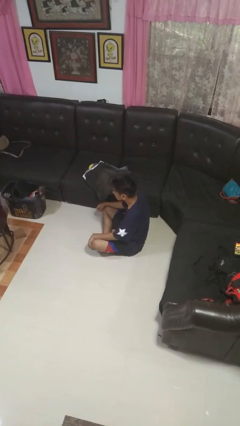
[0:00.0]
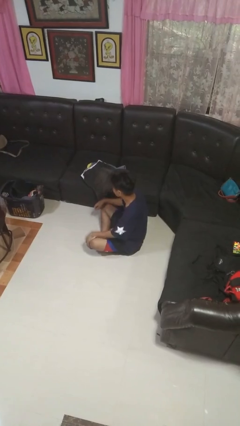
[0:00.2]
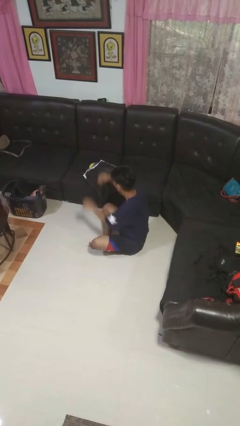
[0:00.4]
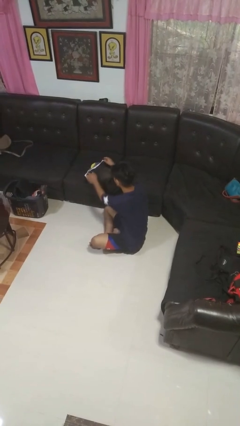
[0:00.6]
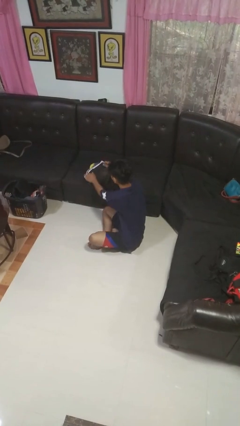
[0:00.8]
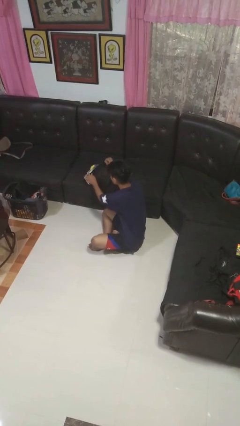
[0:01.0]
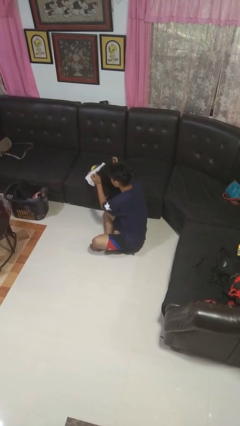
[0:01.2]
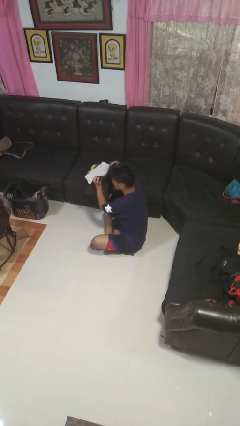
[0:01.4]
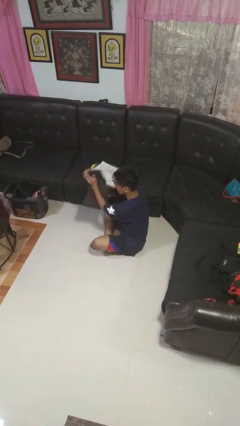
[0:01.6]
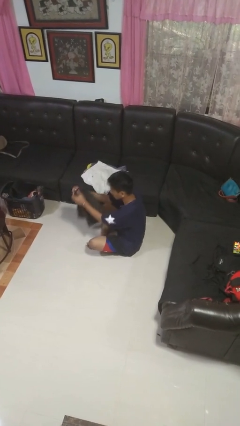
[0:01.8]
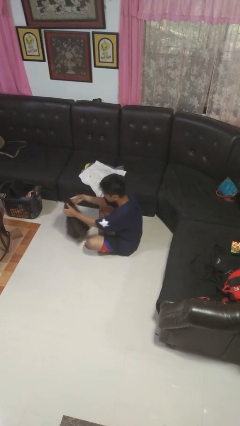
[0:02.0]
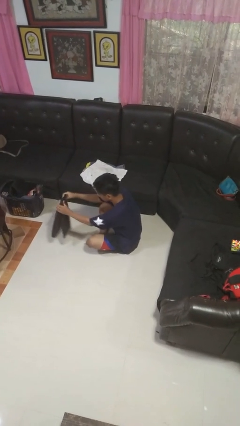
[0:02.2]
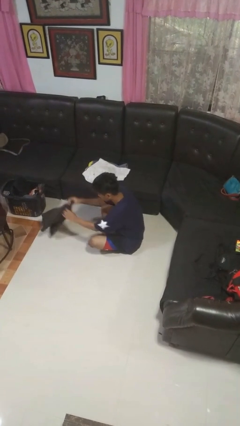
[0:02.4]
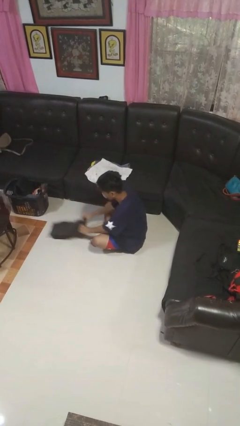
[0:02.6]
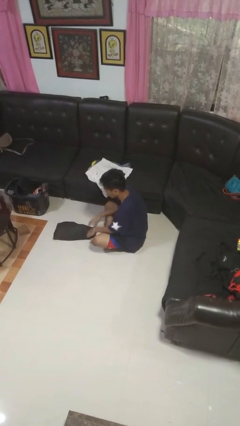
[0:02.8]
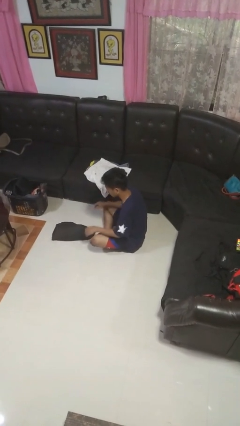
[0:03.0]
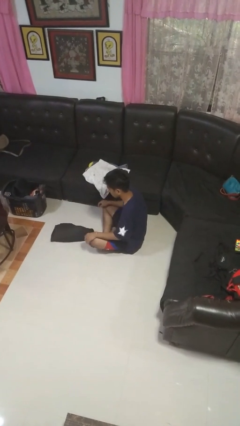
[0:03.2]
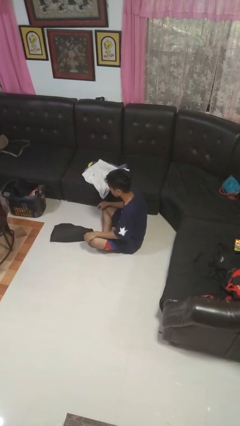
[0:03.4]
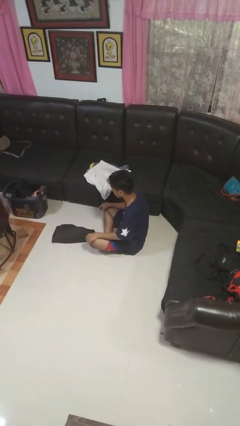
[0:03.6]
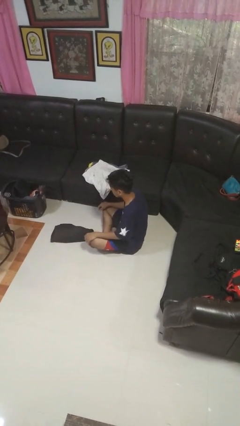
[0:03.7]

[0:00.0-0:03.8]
person folds pants

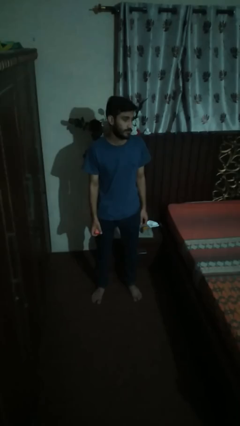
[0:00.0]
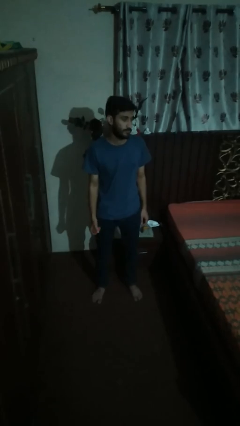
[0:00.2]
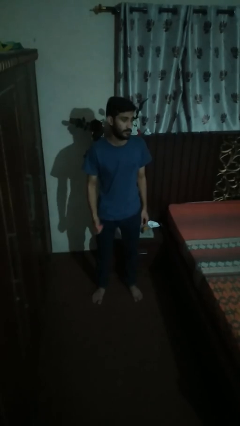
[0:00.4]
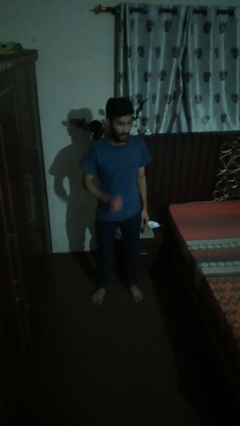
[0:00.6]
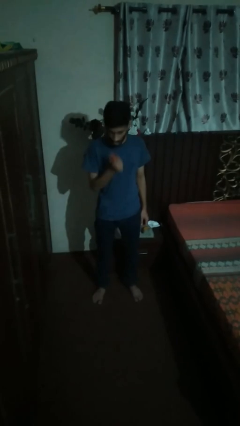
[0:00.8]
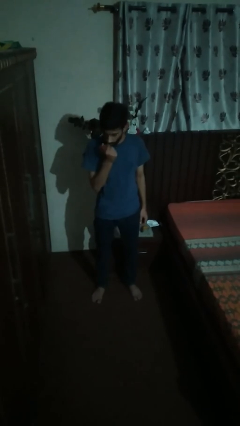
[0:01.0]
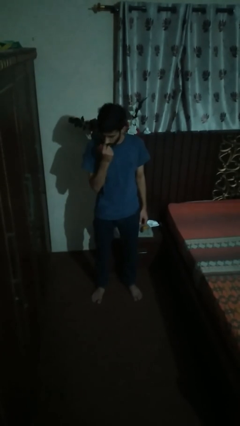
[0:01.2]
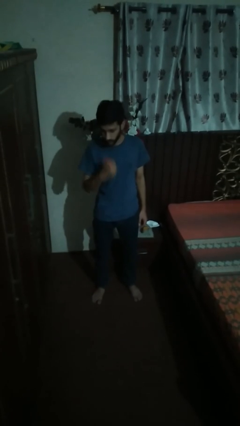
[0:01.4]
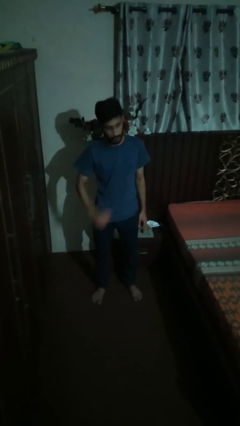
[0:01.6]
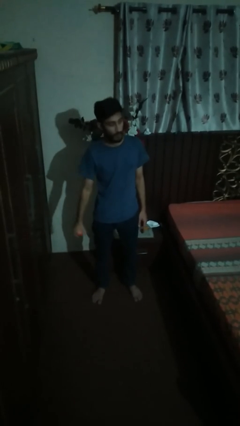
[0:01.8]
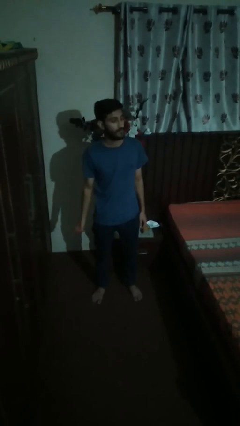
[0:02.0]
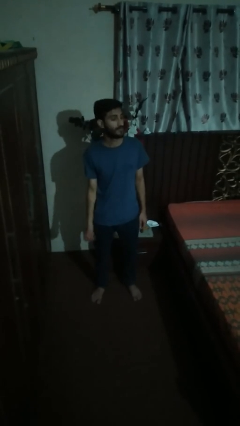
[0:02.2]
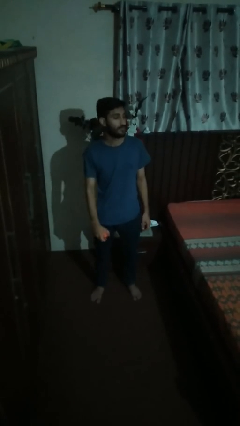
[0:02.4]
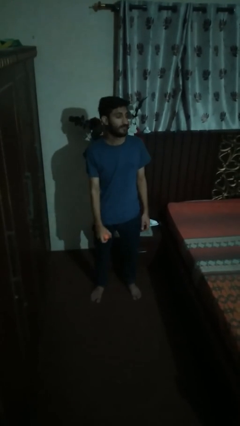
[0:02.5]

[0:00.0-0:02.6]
person eats apple

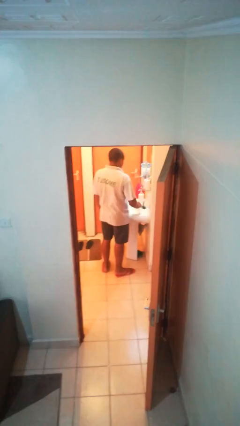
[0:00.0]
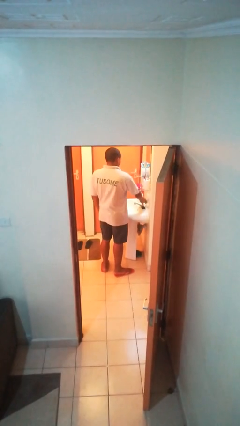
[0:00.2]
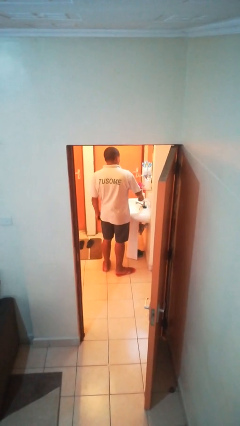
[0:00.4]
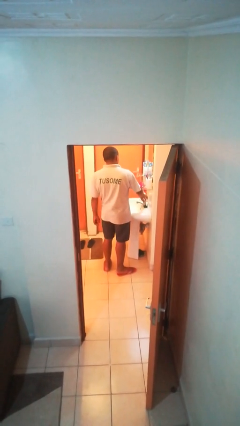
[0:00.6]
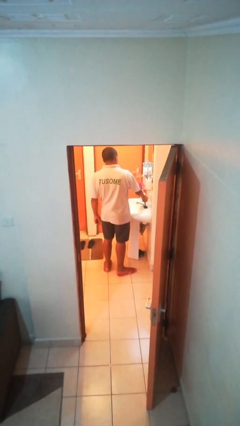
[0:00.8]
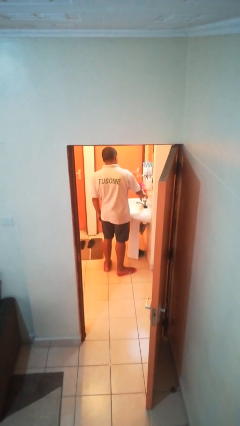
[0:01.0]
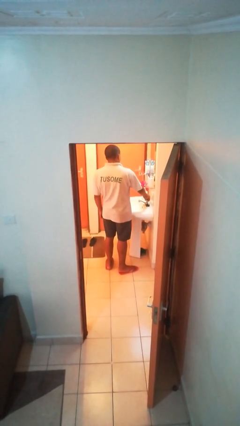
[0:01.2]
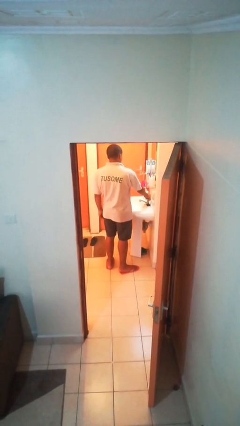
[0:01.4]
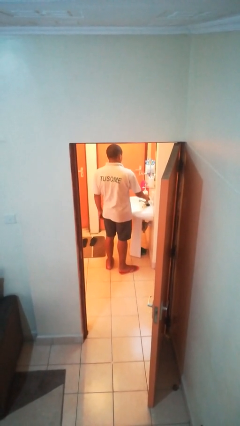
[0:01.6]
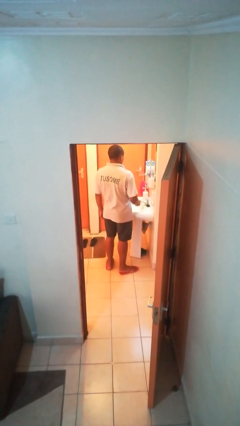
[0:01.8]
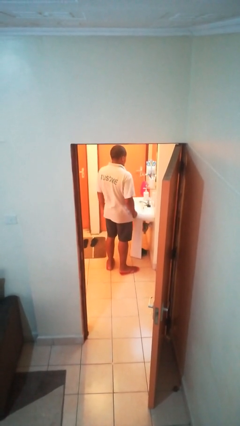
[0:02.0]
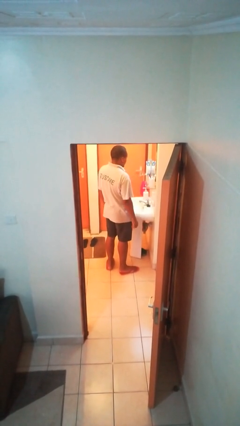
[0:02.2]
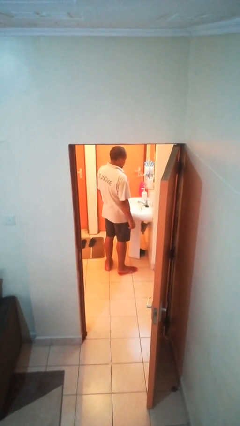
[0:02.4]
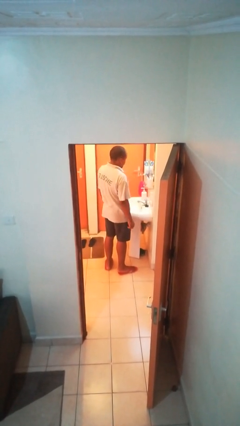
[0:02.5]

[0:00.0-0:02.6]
person turns off faucet

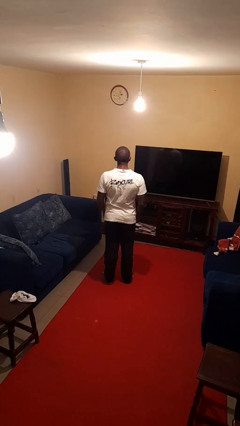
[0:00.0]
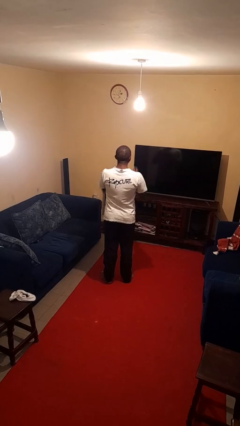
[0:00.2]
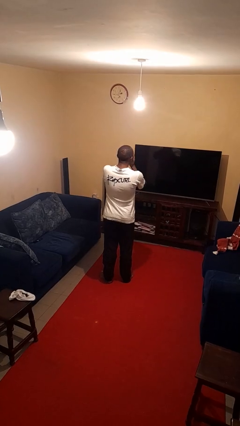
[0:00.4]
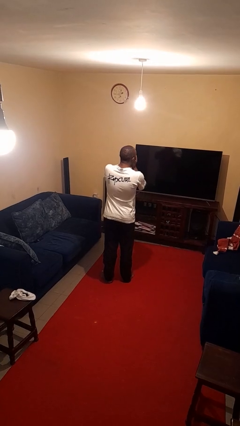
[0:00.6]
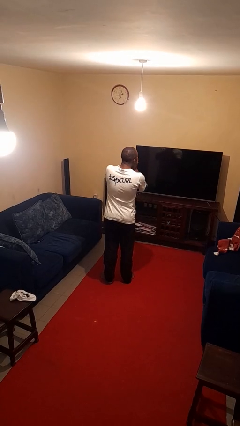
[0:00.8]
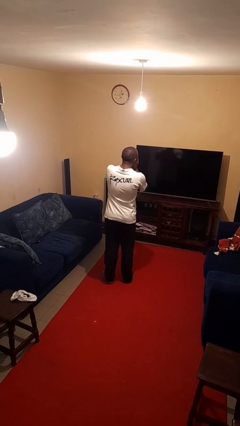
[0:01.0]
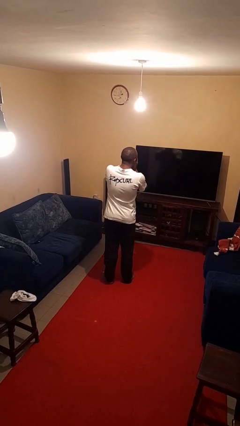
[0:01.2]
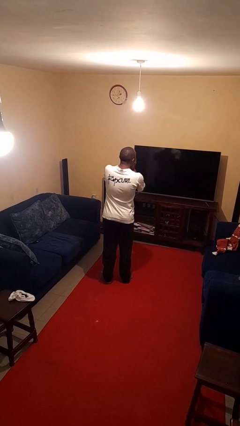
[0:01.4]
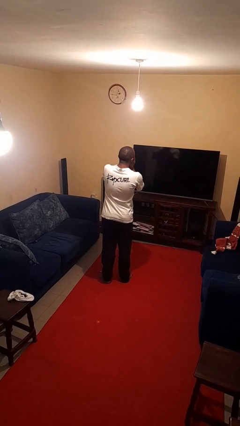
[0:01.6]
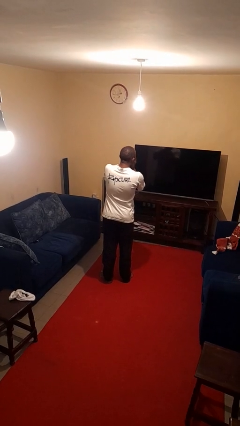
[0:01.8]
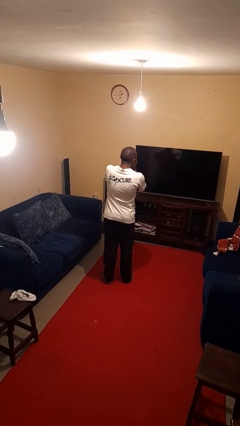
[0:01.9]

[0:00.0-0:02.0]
person sneezes into hand

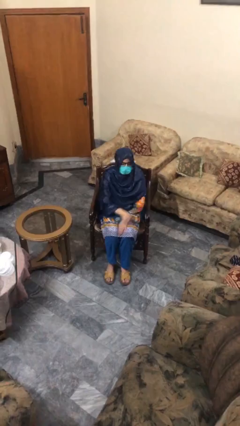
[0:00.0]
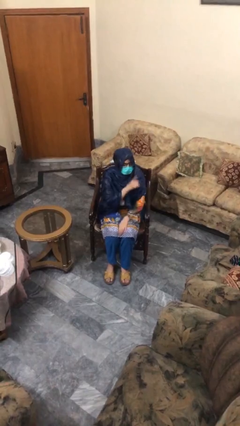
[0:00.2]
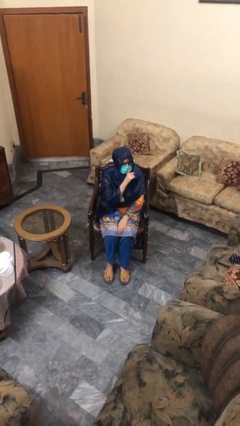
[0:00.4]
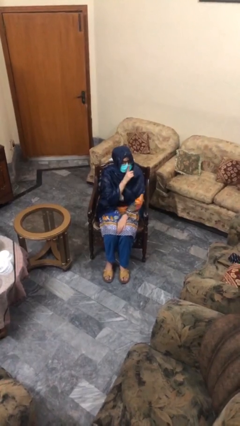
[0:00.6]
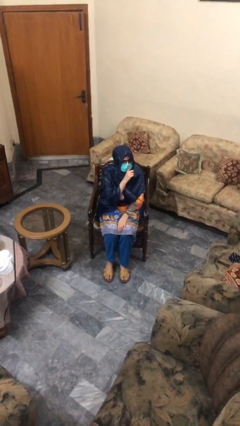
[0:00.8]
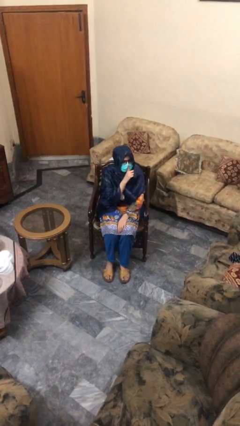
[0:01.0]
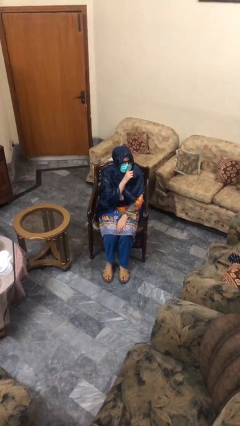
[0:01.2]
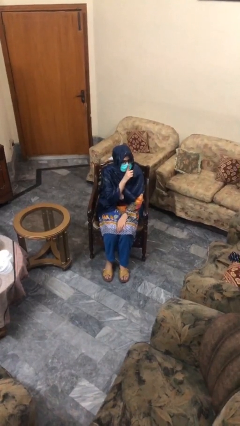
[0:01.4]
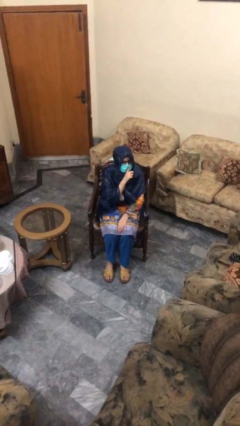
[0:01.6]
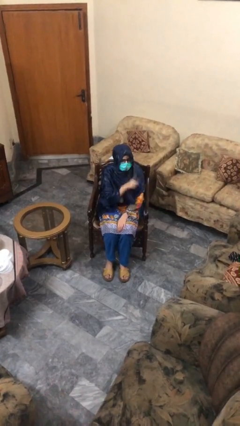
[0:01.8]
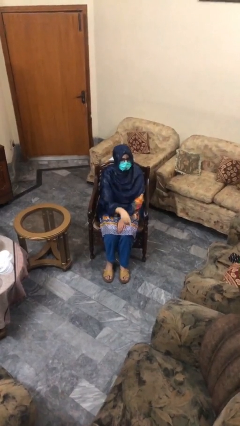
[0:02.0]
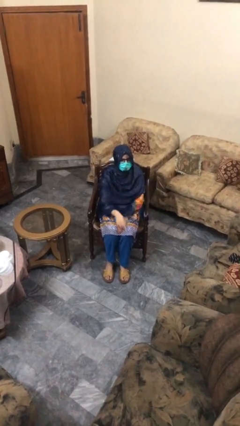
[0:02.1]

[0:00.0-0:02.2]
person gestures be quiet

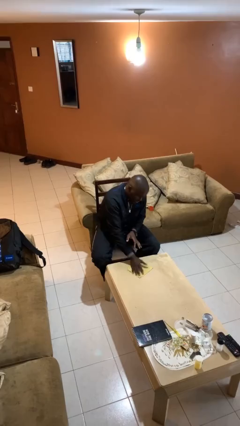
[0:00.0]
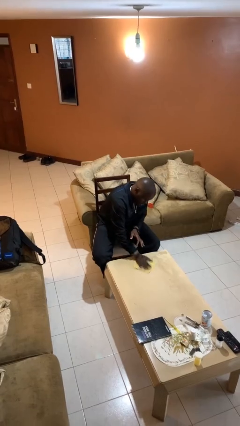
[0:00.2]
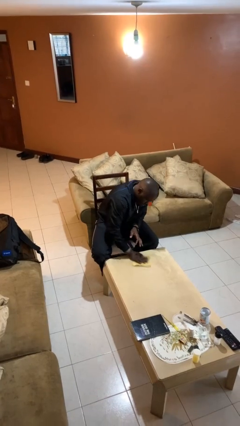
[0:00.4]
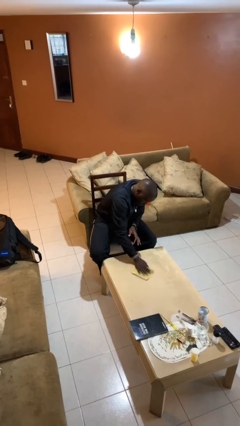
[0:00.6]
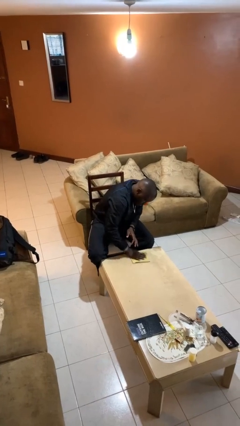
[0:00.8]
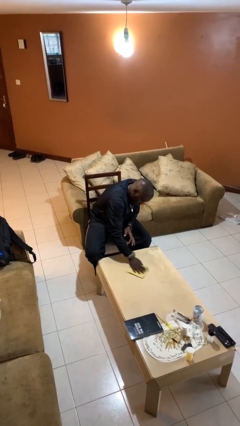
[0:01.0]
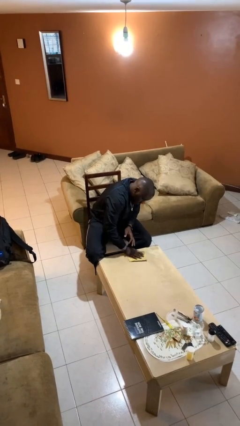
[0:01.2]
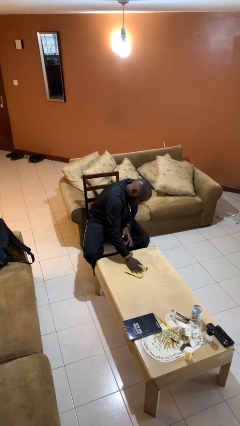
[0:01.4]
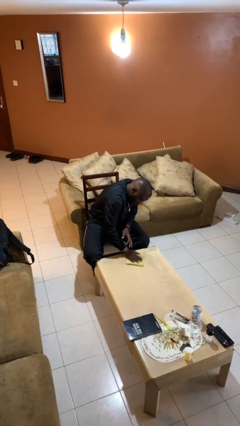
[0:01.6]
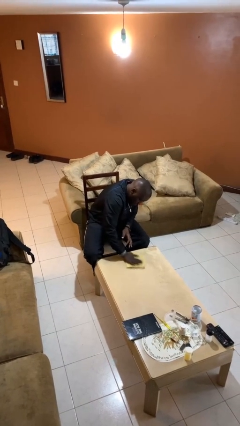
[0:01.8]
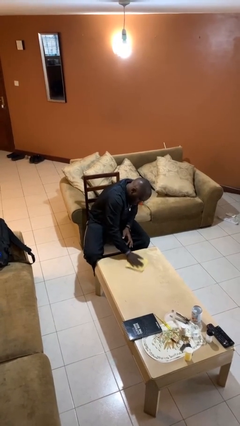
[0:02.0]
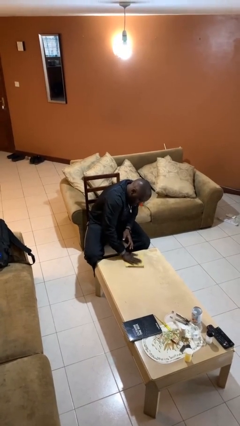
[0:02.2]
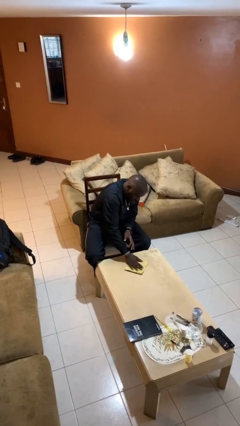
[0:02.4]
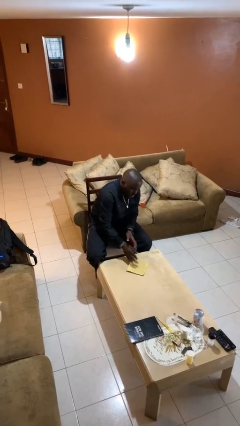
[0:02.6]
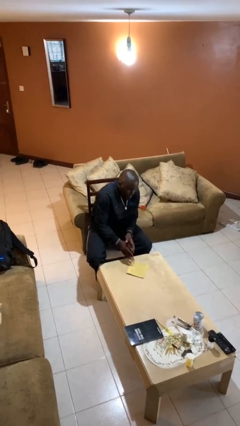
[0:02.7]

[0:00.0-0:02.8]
person cleans table with rag

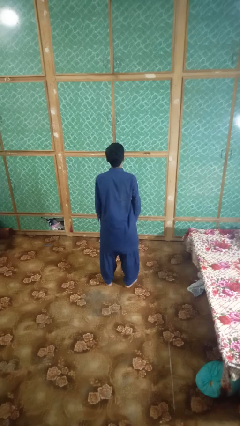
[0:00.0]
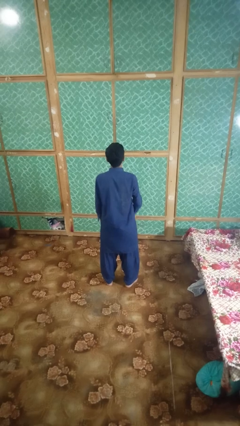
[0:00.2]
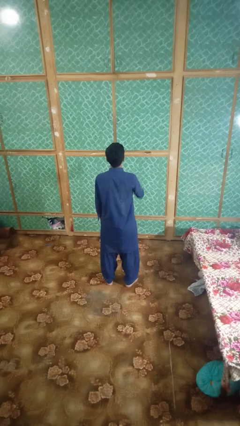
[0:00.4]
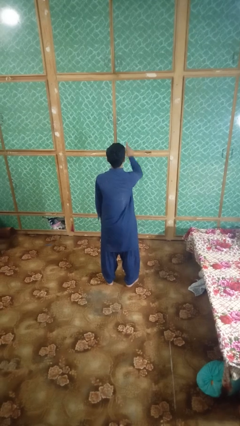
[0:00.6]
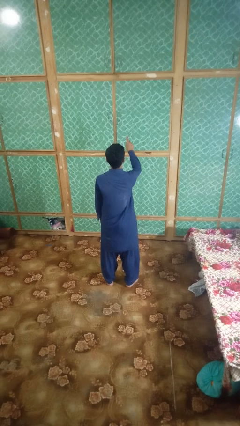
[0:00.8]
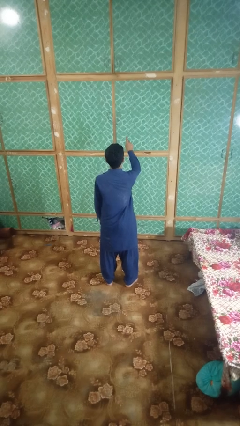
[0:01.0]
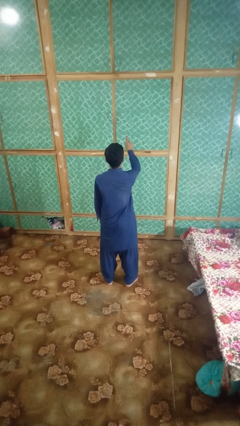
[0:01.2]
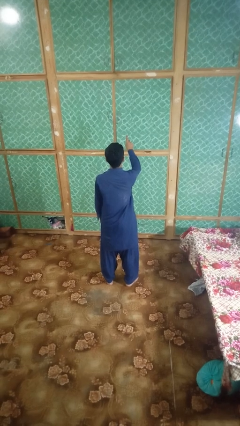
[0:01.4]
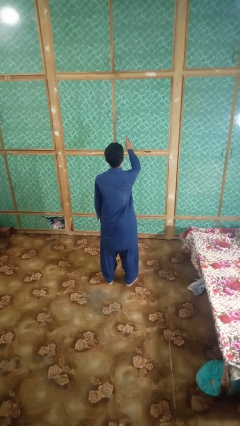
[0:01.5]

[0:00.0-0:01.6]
person gestures number one
